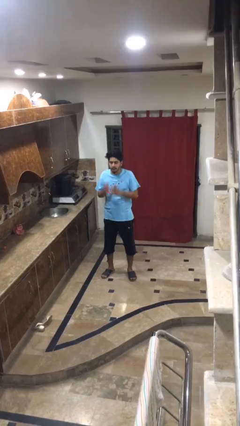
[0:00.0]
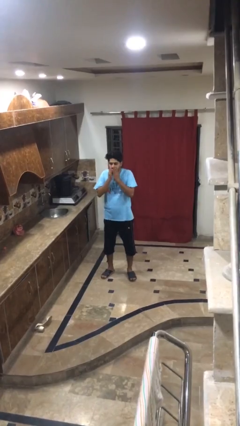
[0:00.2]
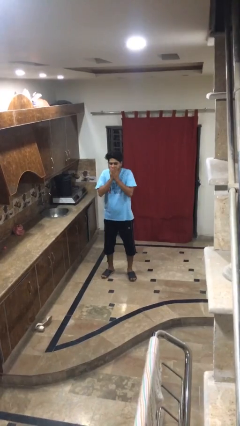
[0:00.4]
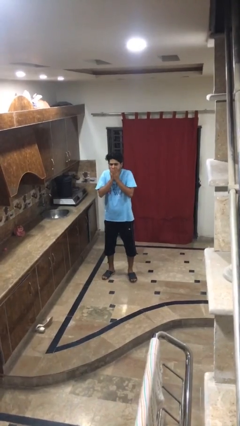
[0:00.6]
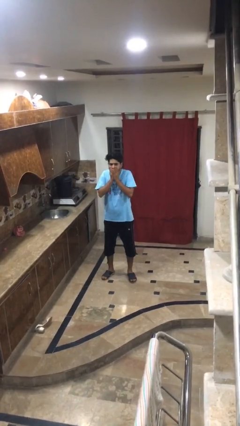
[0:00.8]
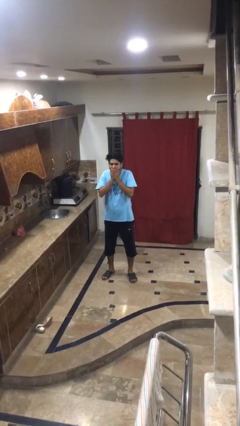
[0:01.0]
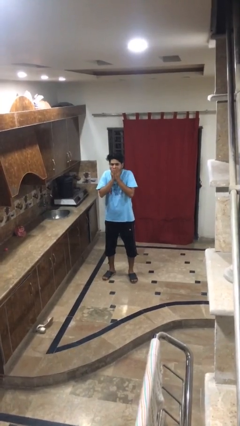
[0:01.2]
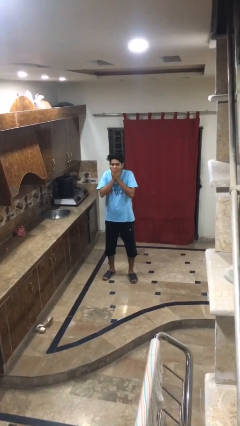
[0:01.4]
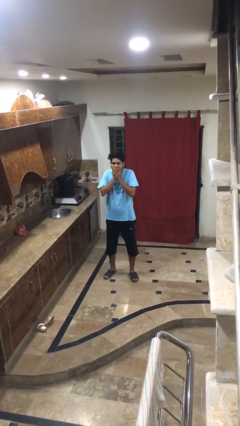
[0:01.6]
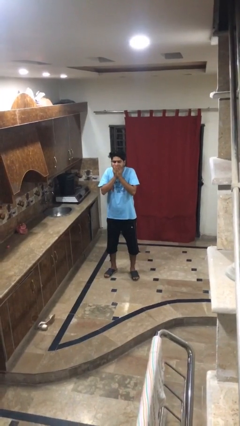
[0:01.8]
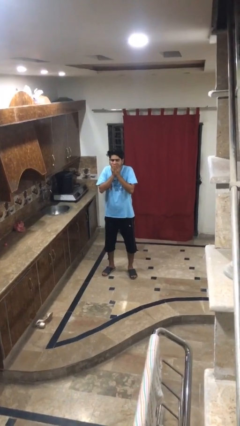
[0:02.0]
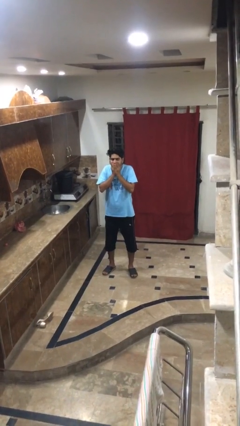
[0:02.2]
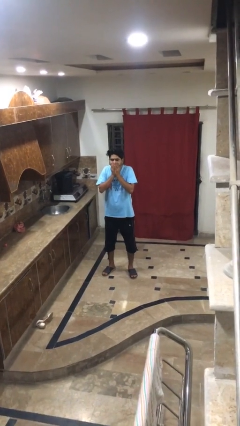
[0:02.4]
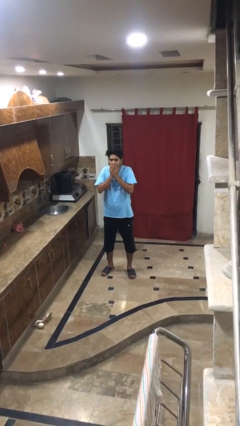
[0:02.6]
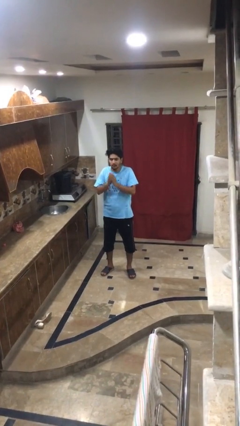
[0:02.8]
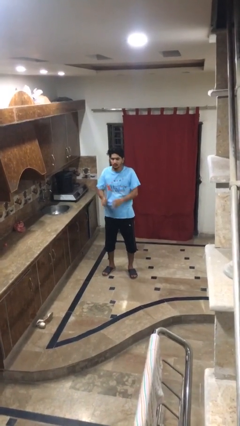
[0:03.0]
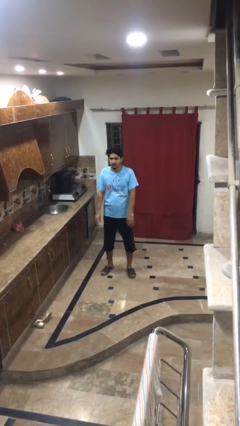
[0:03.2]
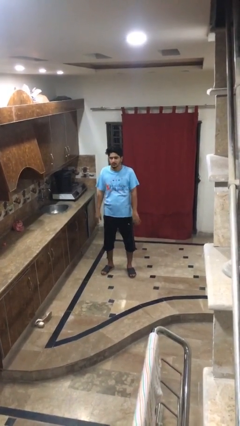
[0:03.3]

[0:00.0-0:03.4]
person sneezes into hand

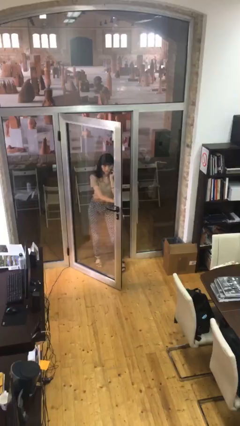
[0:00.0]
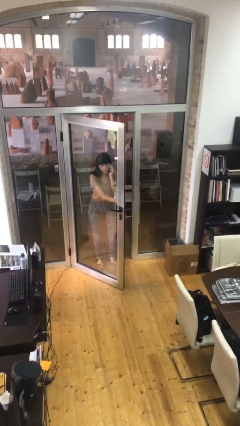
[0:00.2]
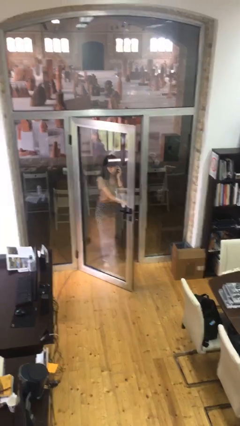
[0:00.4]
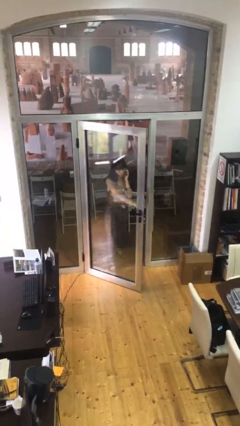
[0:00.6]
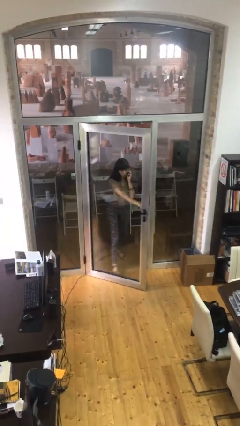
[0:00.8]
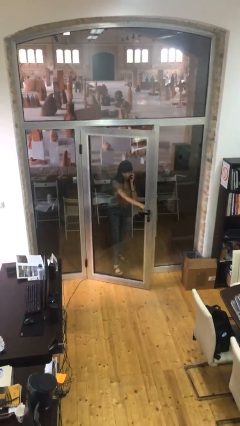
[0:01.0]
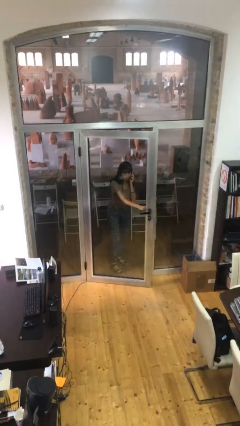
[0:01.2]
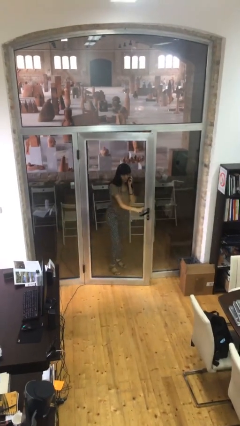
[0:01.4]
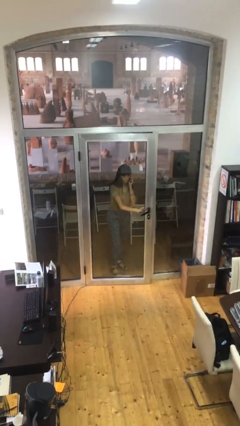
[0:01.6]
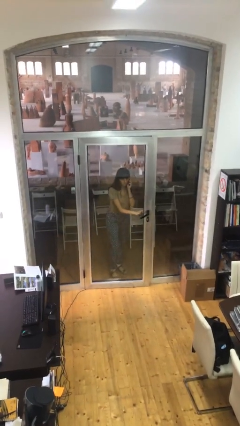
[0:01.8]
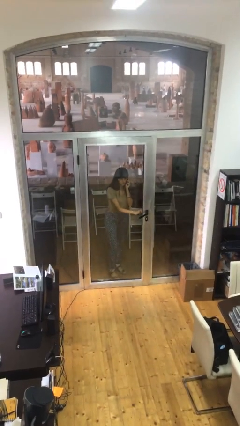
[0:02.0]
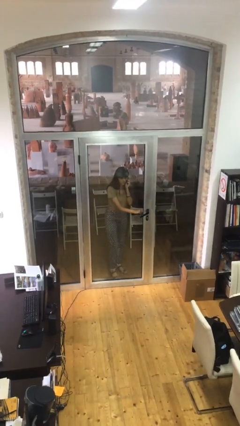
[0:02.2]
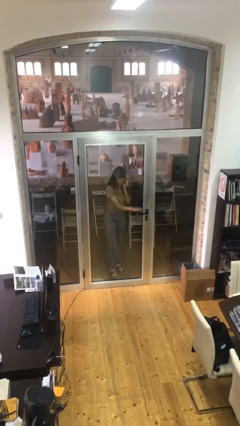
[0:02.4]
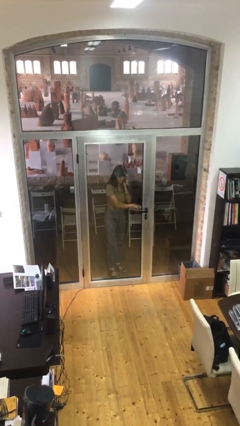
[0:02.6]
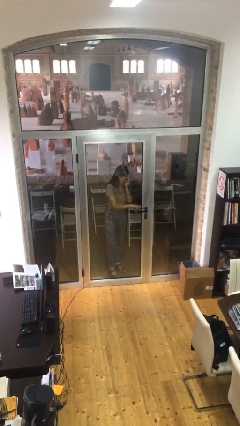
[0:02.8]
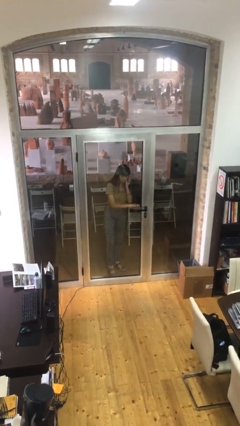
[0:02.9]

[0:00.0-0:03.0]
person closes facility door

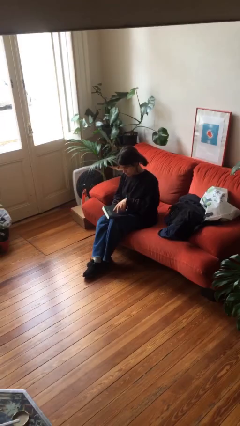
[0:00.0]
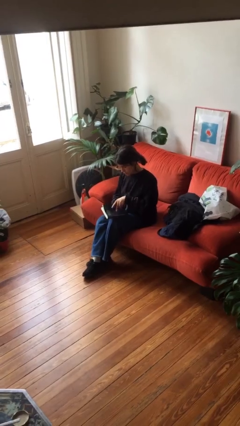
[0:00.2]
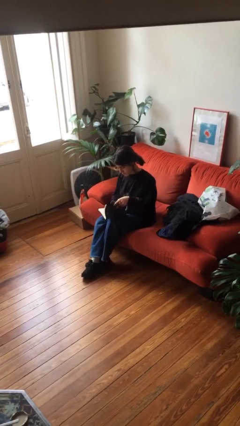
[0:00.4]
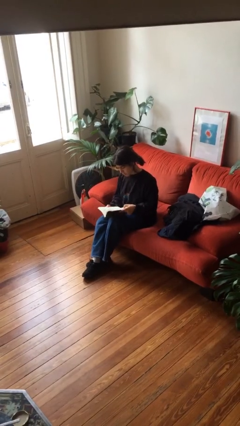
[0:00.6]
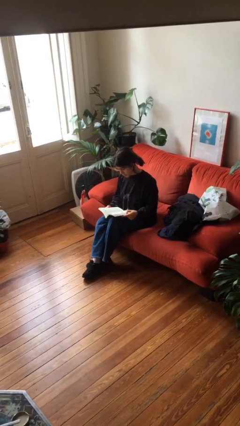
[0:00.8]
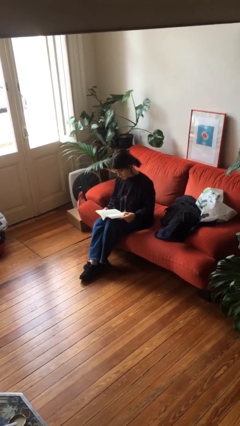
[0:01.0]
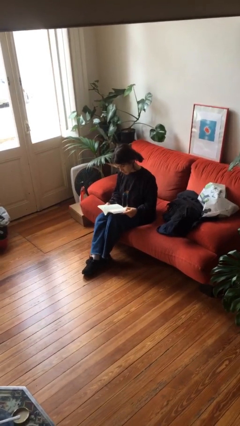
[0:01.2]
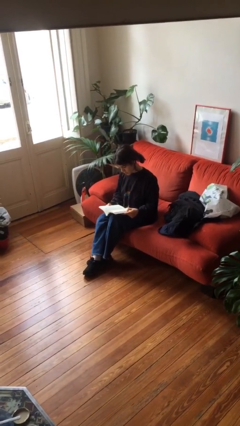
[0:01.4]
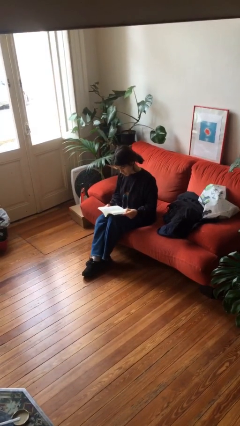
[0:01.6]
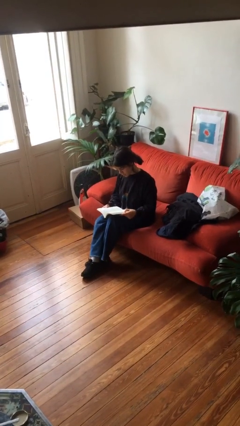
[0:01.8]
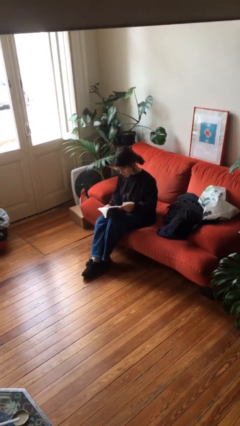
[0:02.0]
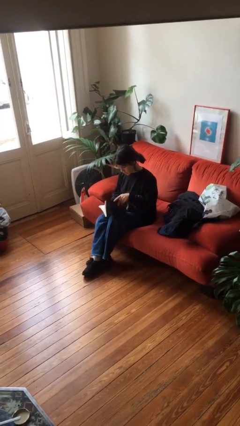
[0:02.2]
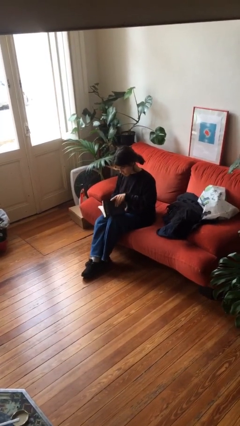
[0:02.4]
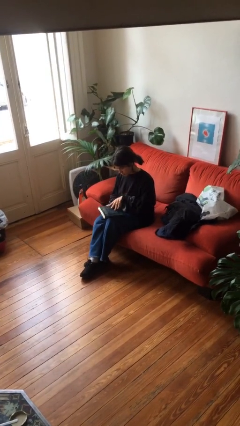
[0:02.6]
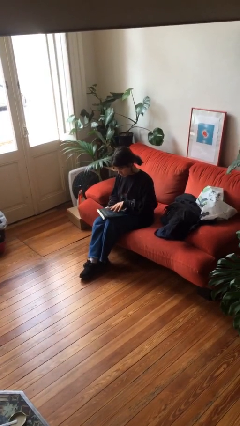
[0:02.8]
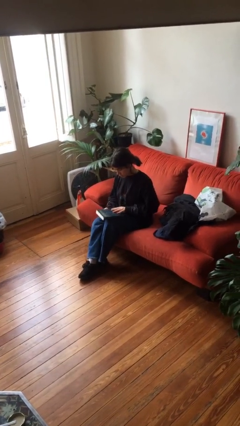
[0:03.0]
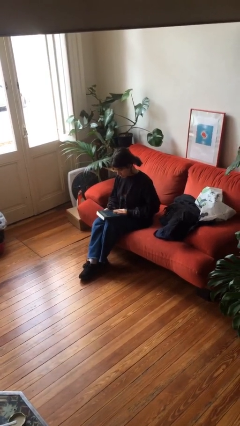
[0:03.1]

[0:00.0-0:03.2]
person reads book

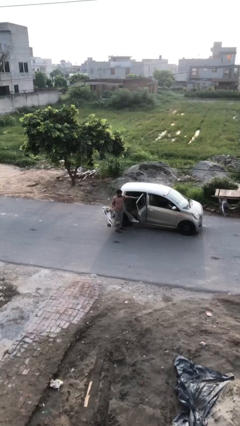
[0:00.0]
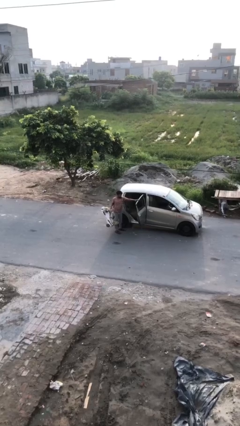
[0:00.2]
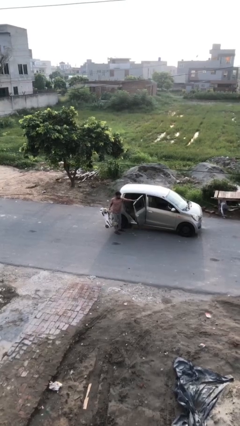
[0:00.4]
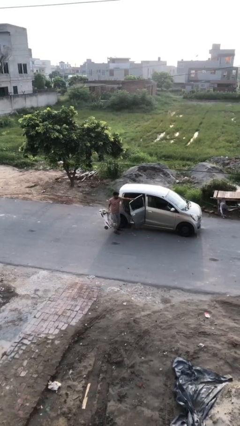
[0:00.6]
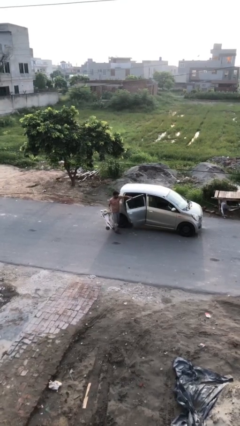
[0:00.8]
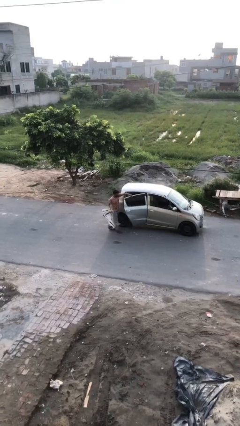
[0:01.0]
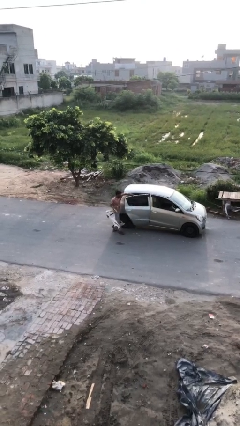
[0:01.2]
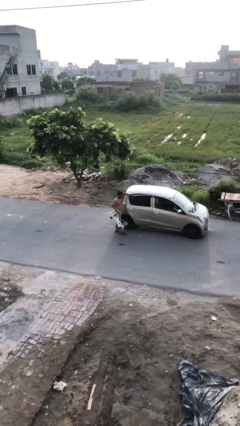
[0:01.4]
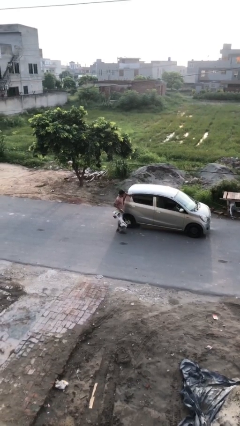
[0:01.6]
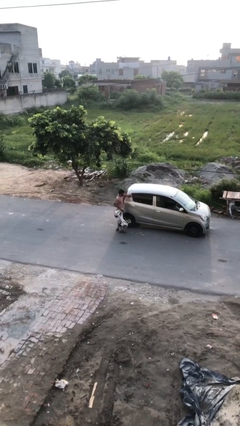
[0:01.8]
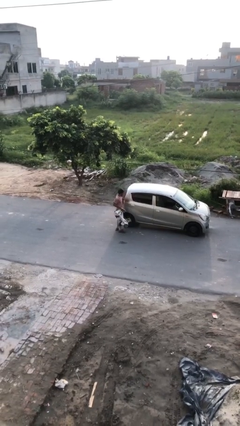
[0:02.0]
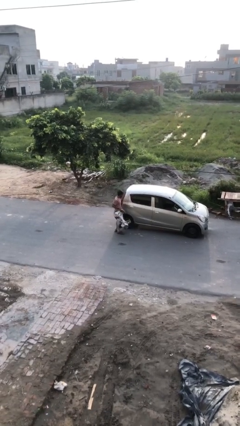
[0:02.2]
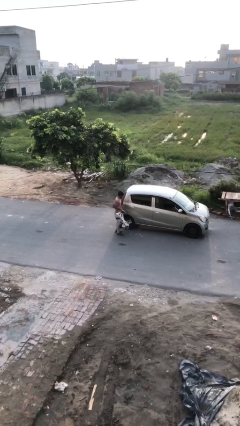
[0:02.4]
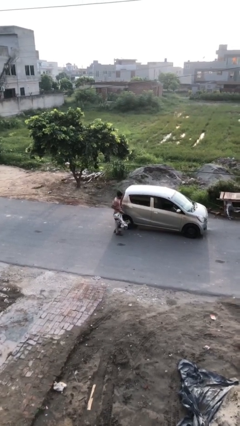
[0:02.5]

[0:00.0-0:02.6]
person closes car door

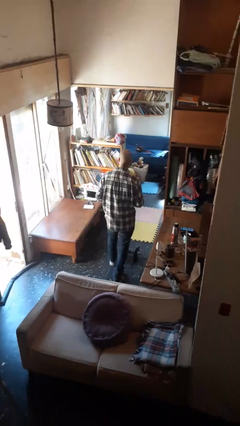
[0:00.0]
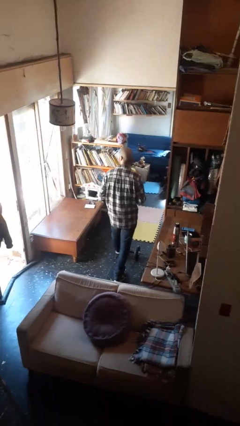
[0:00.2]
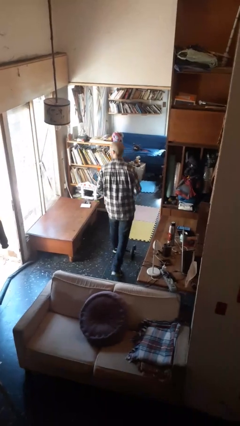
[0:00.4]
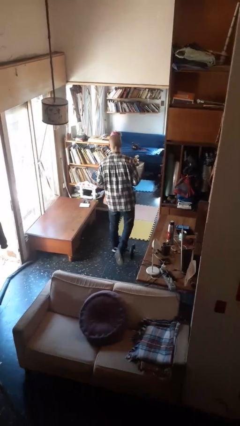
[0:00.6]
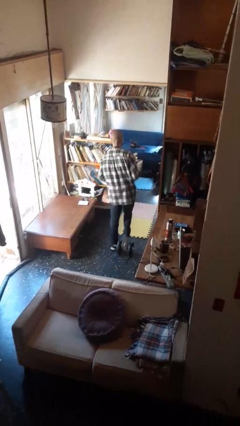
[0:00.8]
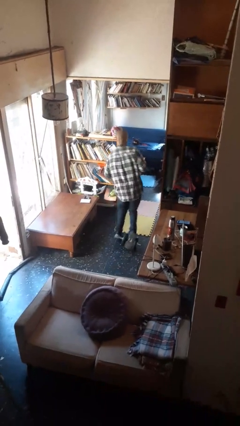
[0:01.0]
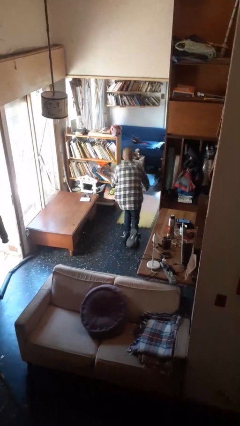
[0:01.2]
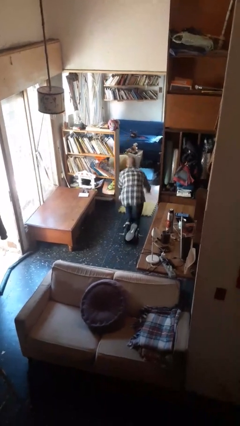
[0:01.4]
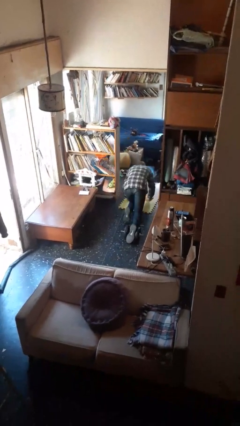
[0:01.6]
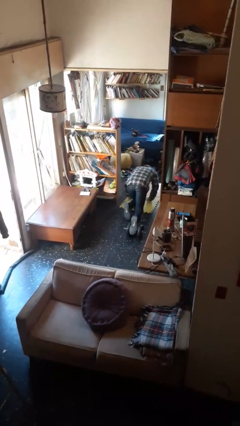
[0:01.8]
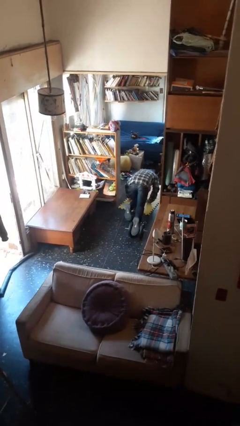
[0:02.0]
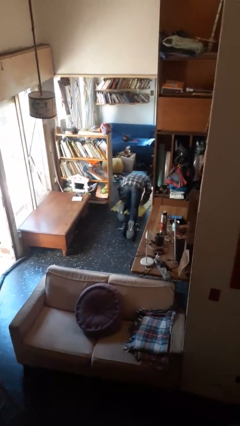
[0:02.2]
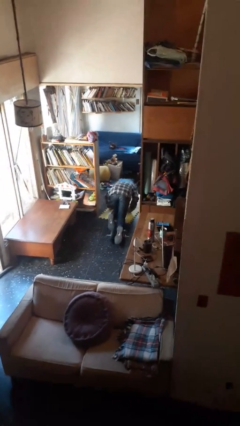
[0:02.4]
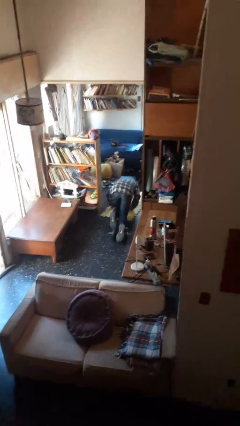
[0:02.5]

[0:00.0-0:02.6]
person trips on object on floor

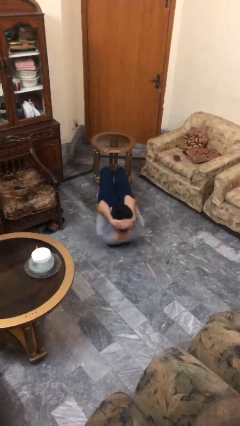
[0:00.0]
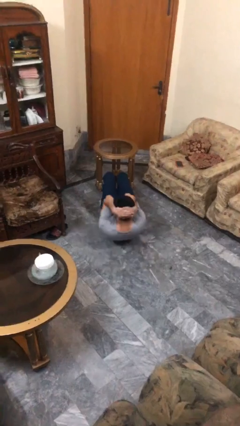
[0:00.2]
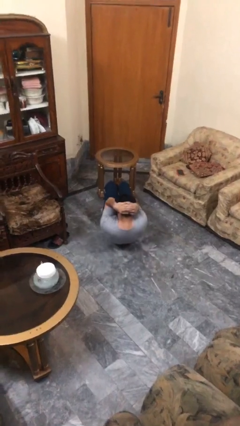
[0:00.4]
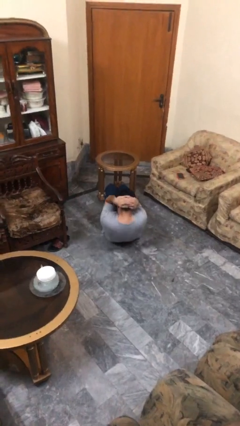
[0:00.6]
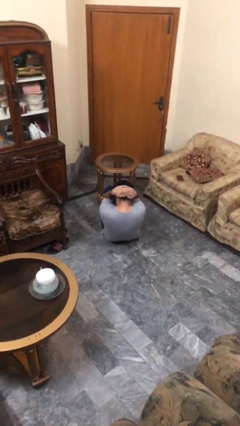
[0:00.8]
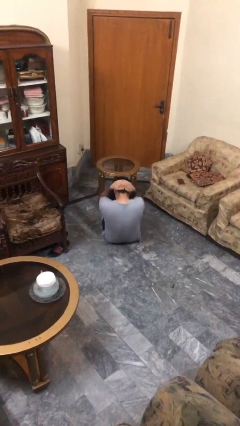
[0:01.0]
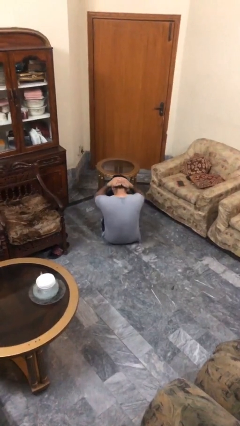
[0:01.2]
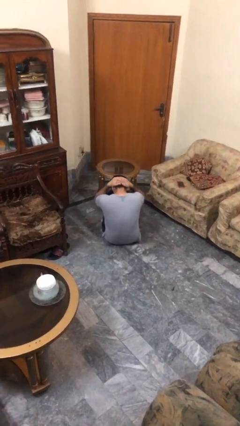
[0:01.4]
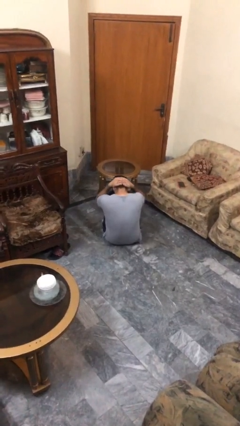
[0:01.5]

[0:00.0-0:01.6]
person exercises with situp

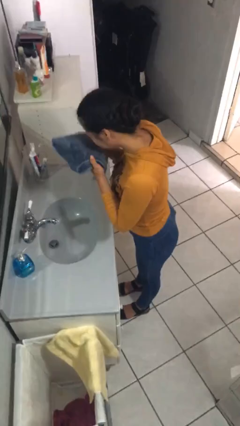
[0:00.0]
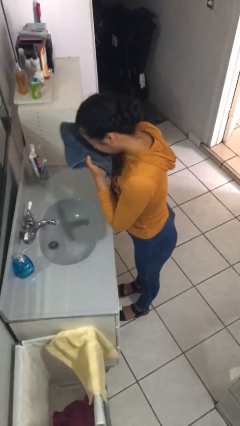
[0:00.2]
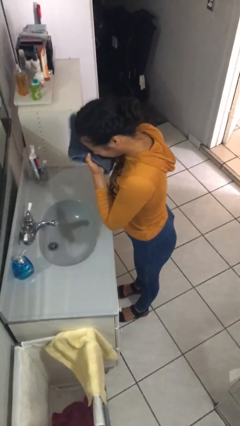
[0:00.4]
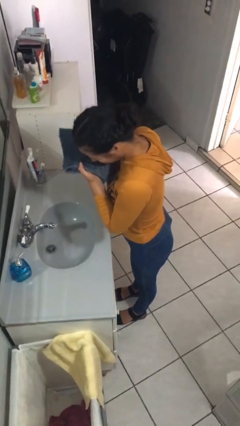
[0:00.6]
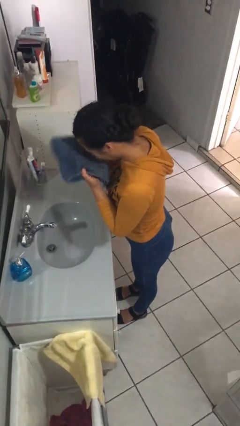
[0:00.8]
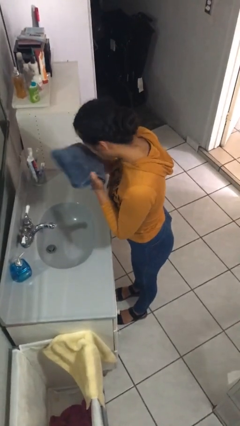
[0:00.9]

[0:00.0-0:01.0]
person dries face with towel
